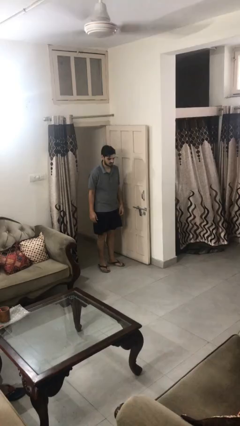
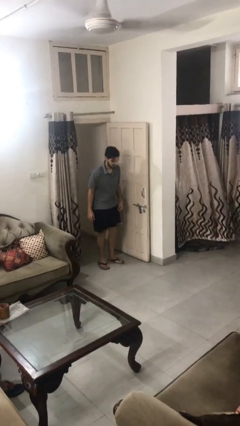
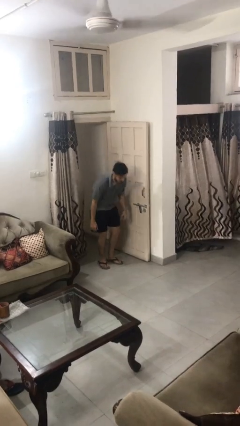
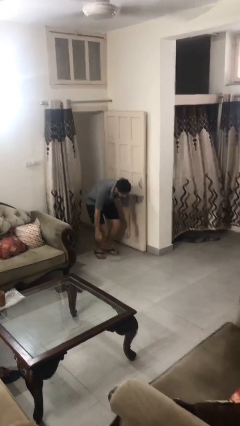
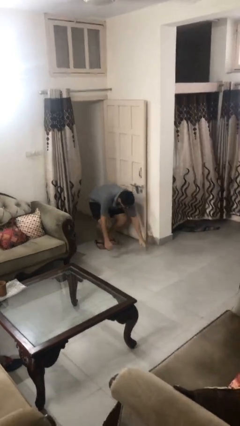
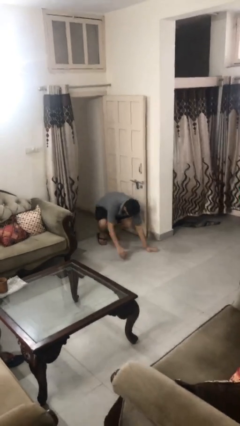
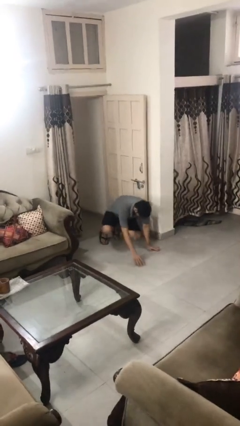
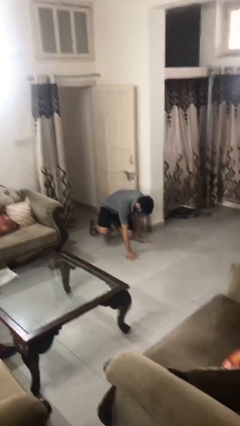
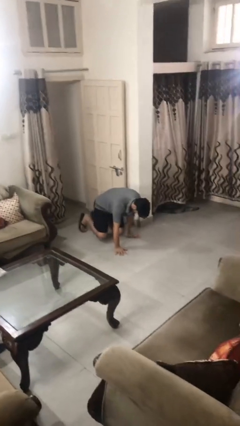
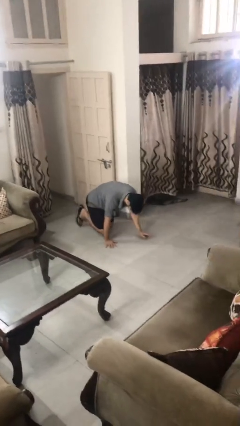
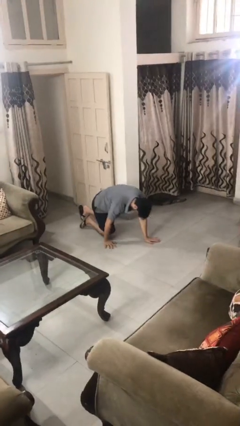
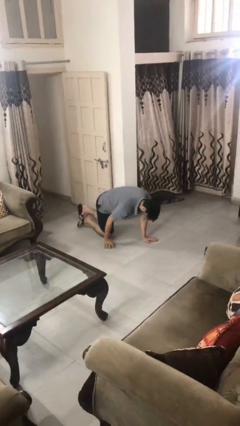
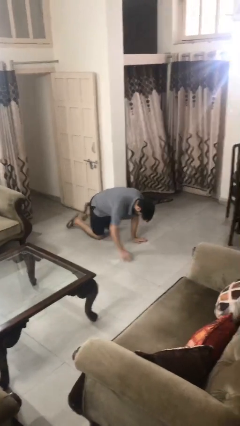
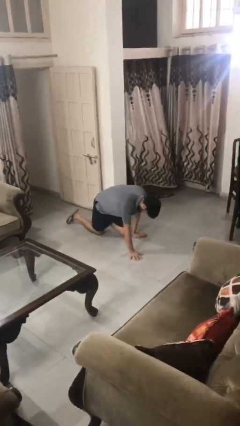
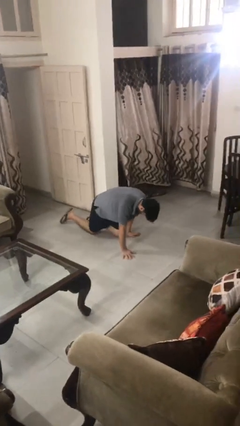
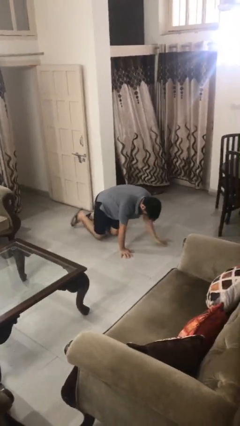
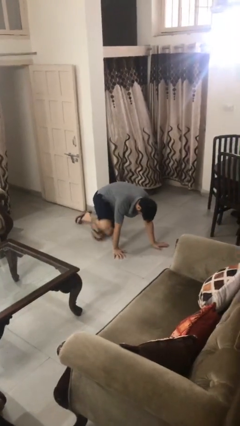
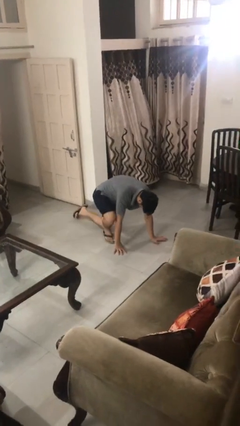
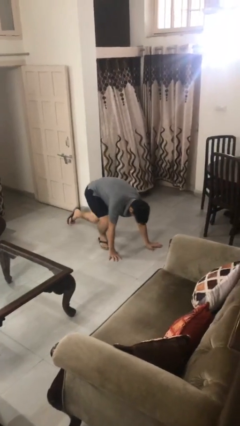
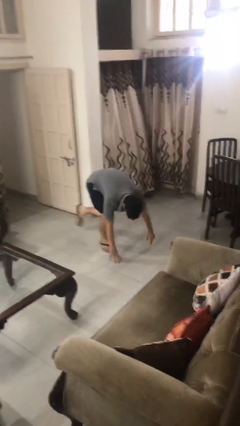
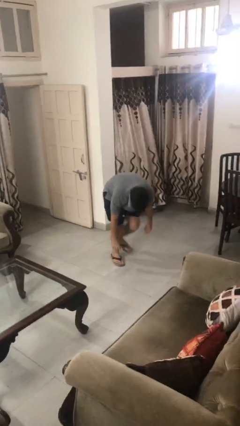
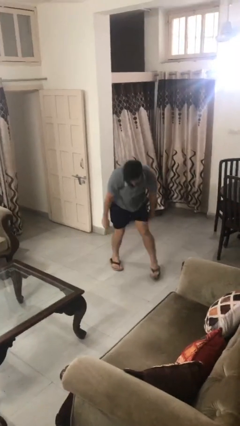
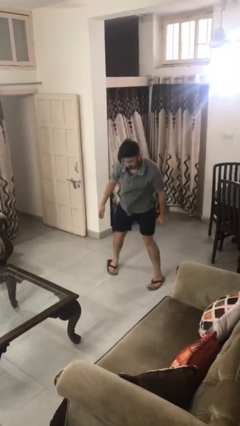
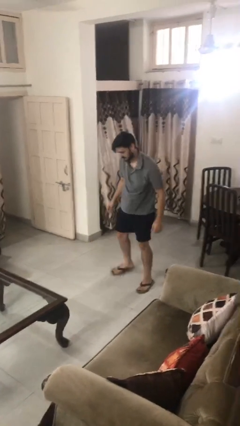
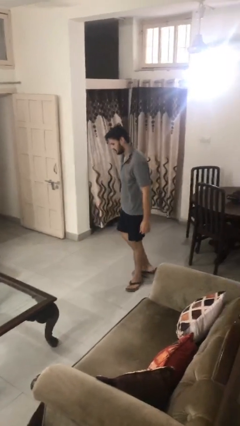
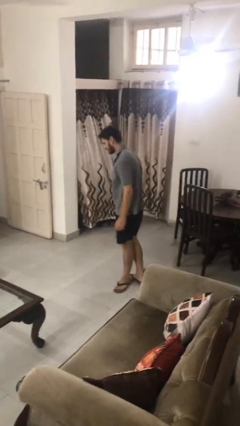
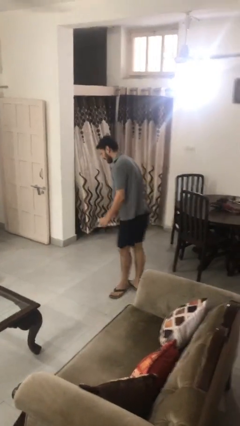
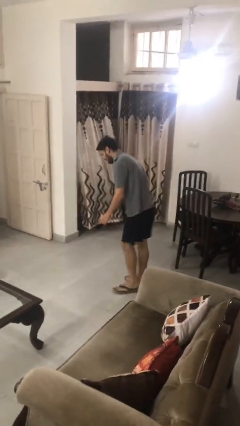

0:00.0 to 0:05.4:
person crawls

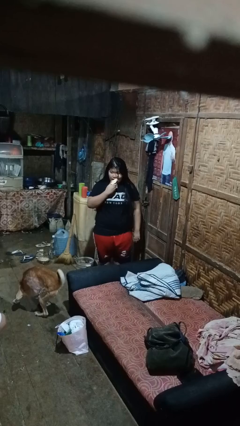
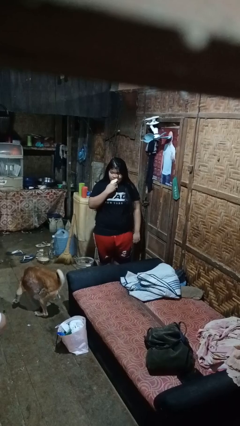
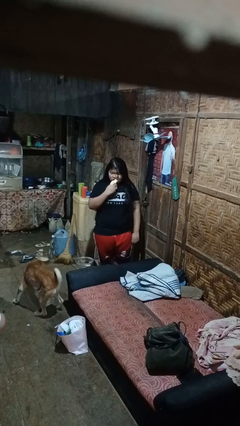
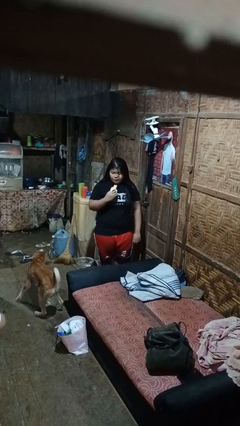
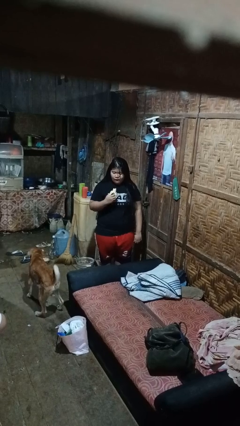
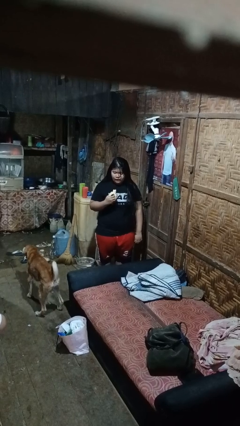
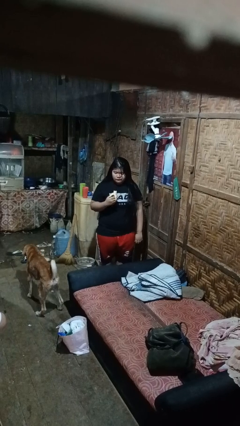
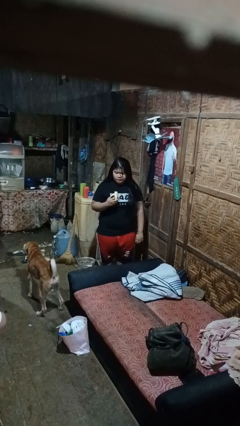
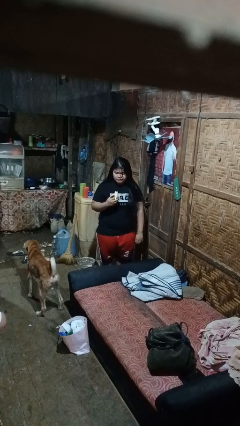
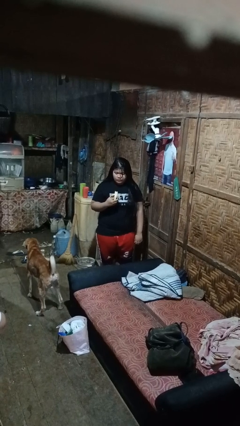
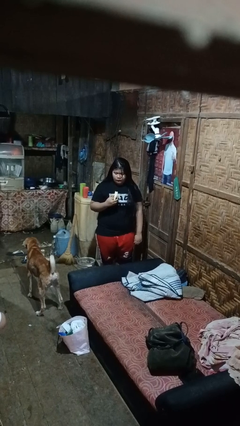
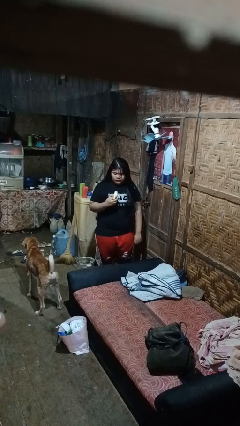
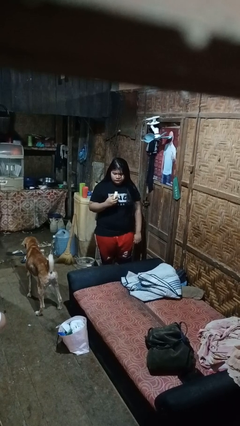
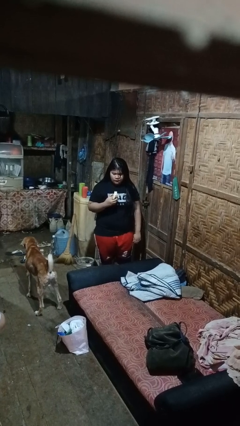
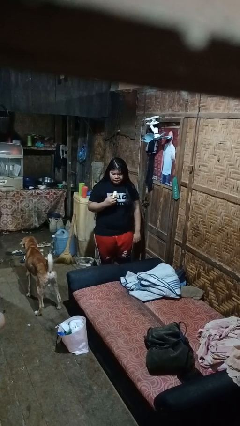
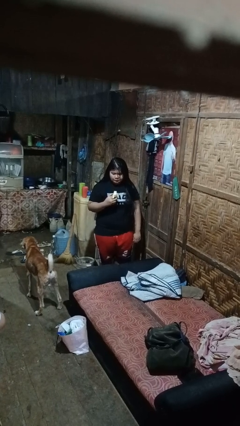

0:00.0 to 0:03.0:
person eats banana

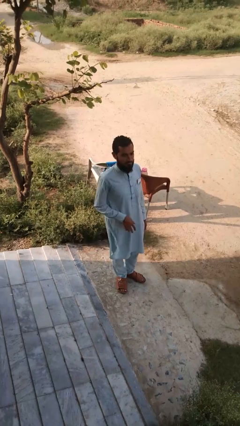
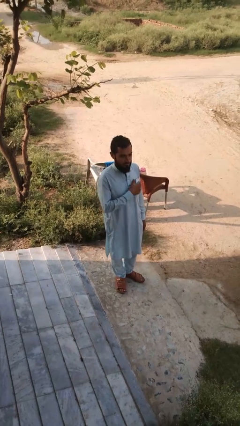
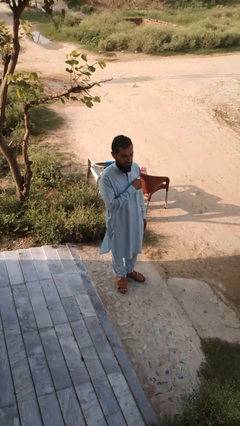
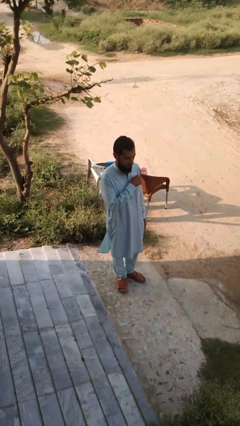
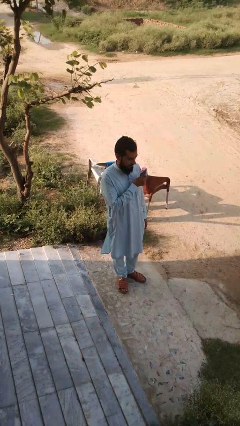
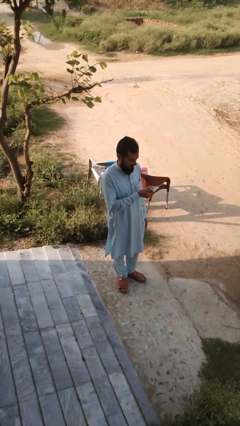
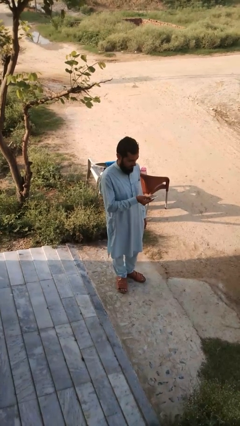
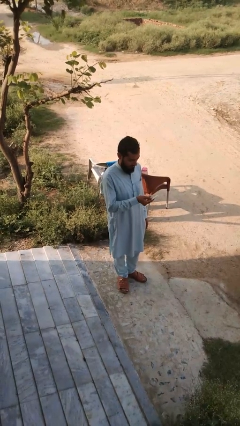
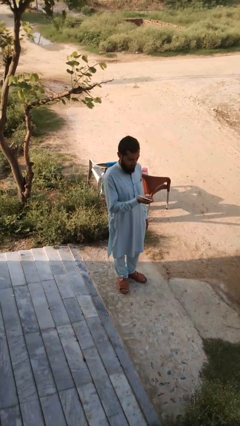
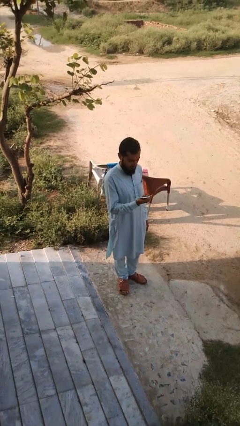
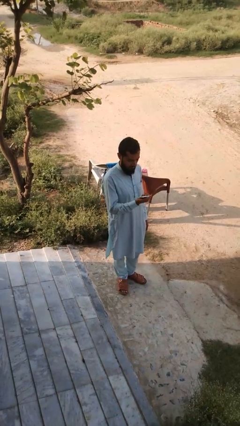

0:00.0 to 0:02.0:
person takes phone from pocket

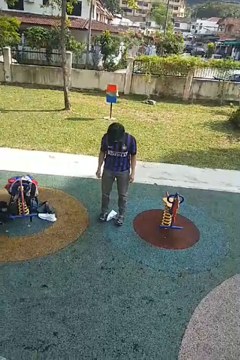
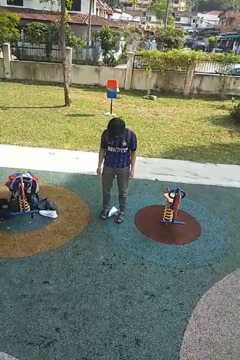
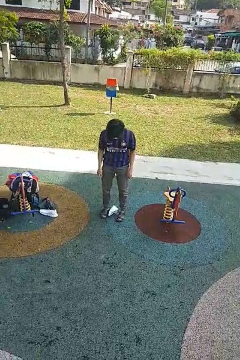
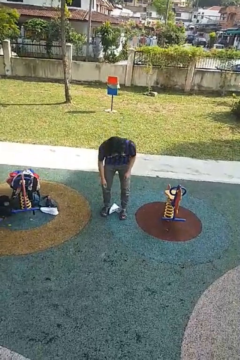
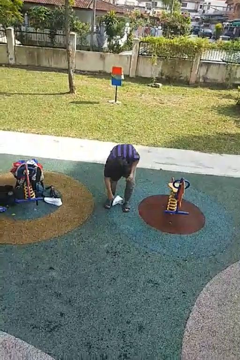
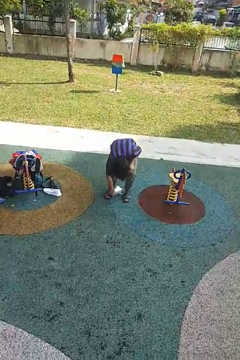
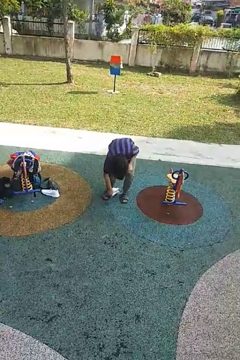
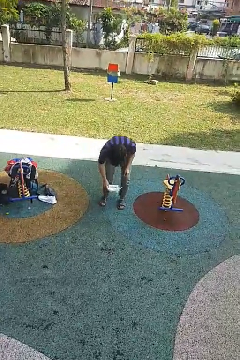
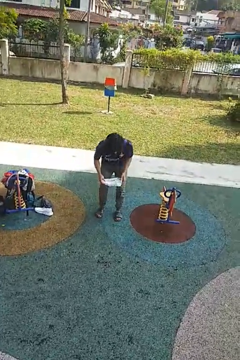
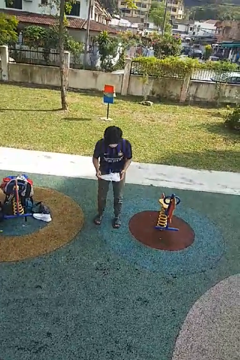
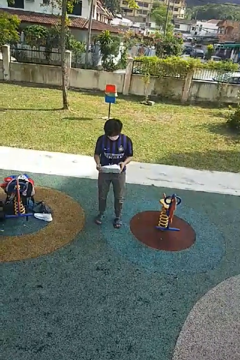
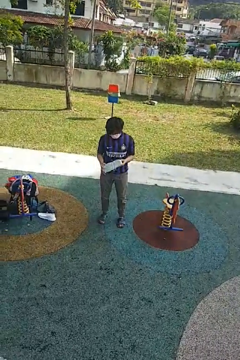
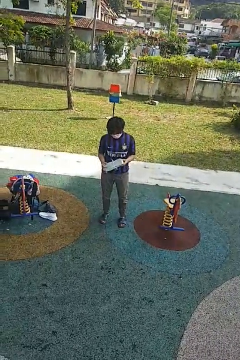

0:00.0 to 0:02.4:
person picks up object from floor

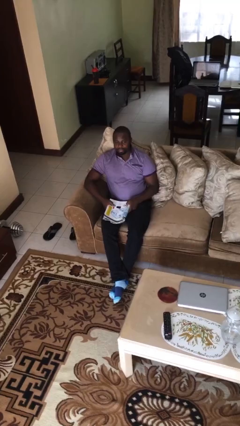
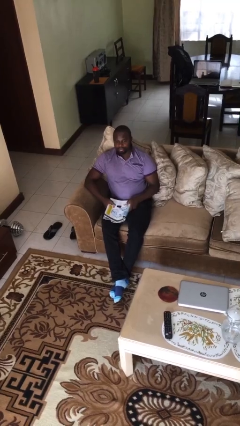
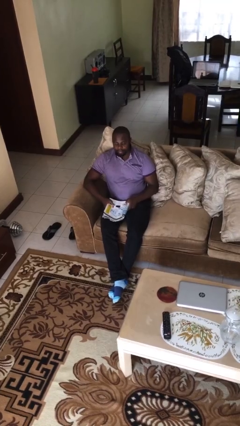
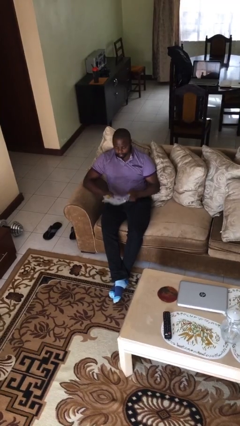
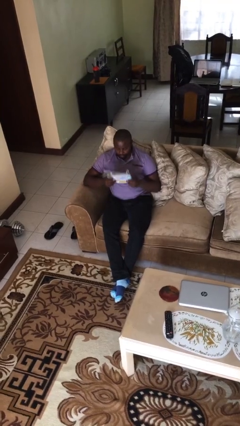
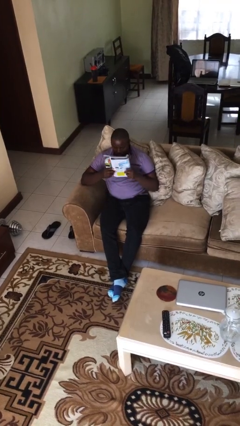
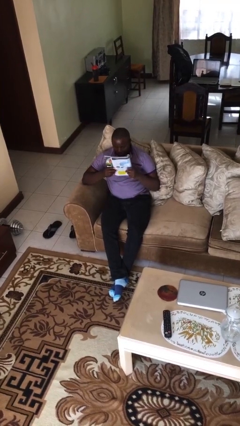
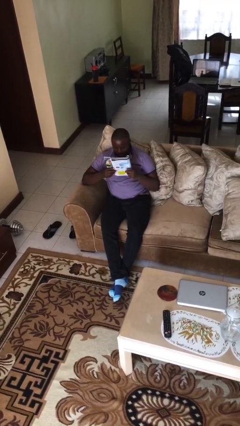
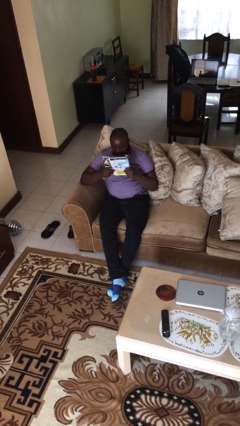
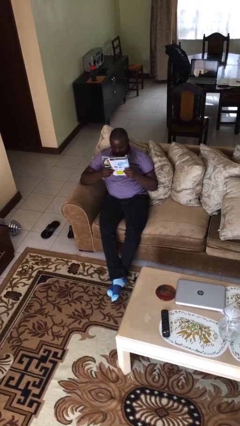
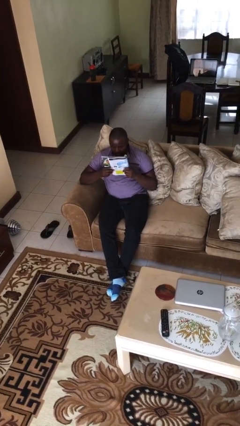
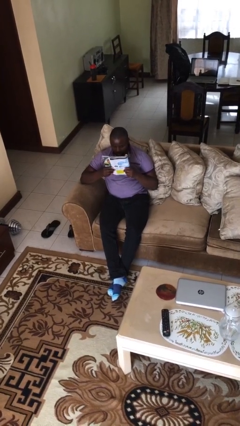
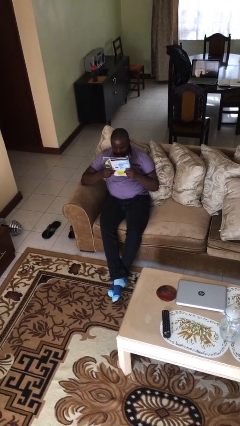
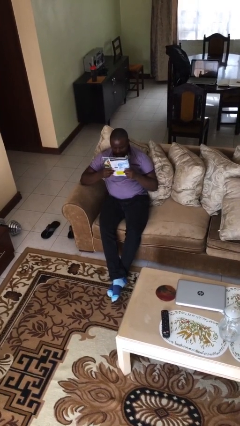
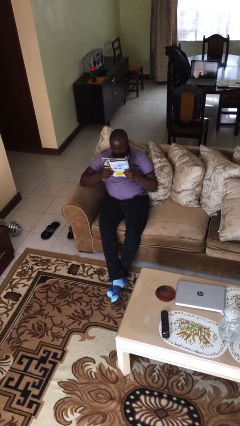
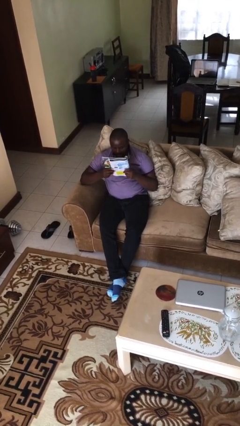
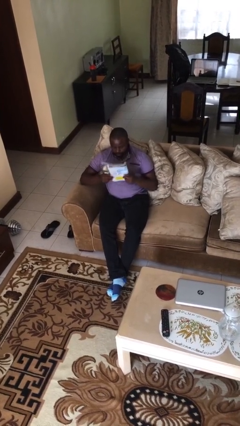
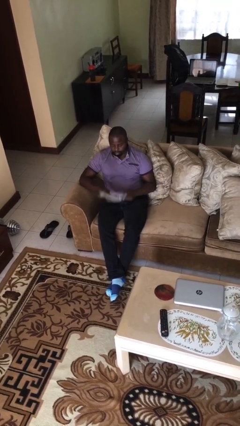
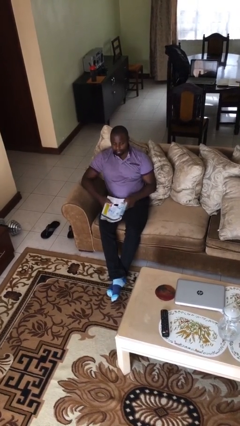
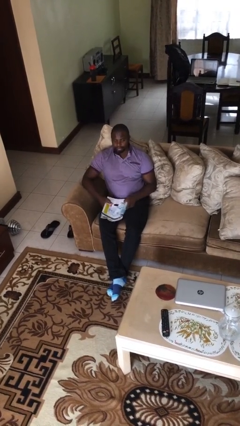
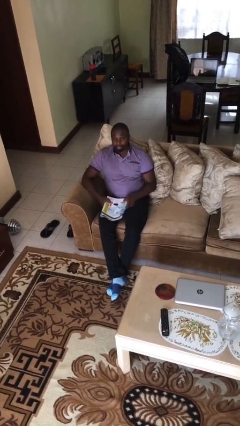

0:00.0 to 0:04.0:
person reads document

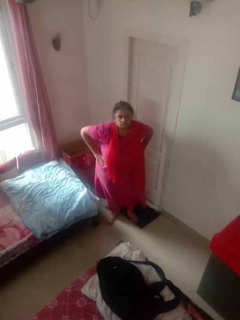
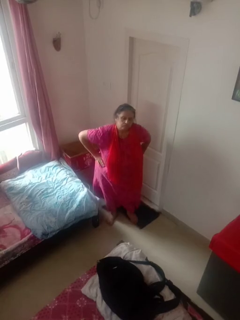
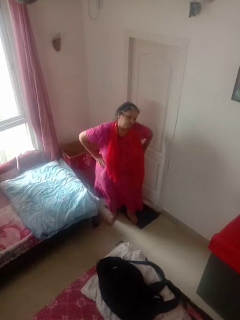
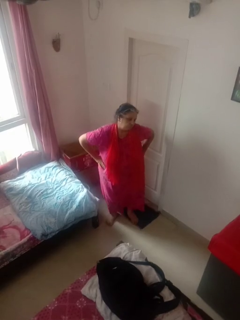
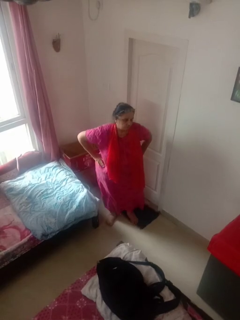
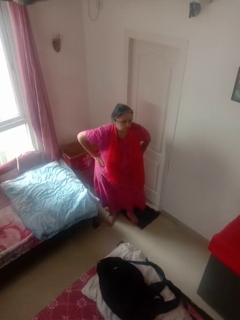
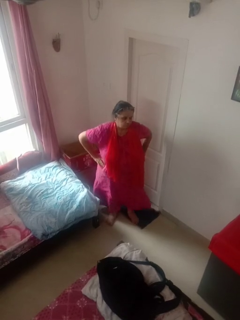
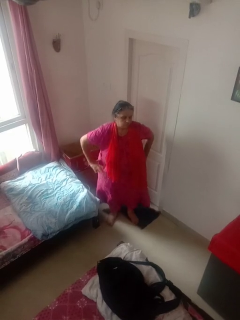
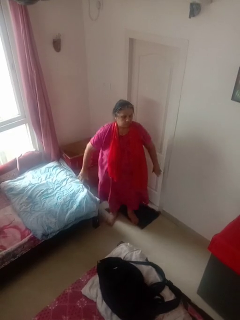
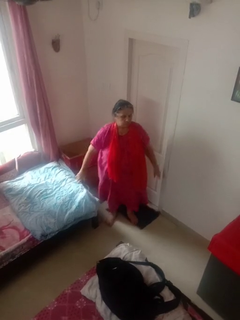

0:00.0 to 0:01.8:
person wiggles hips
